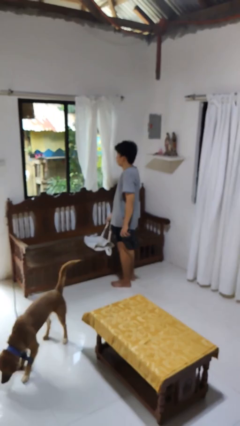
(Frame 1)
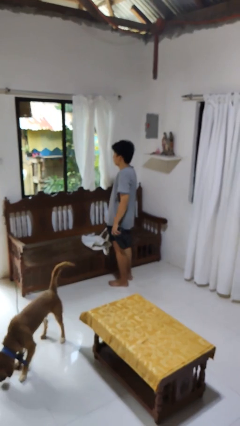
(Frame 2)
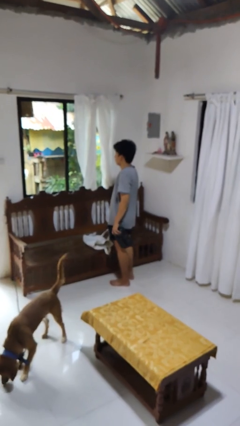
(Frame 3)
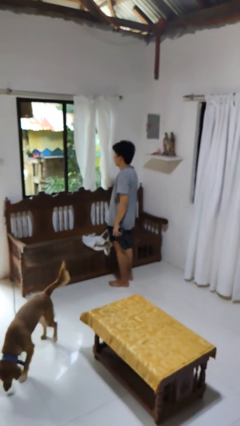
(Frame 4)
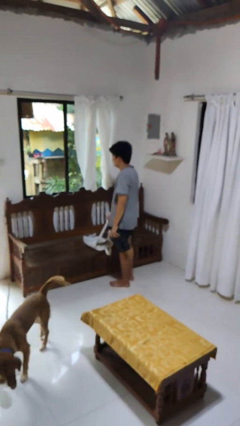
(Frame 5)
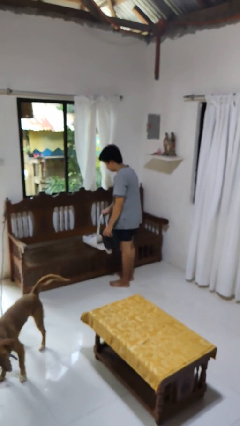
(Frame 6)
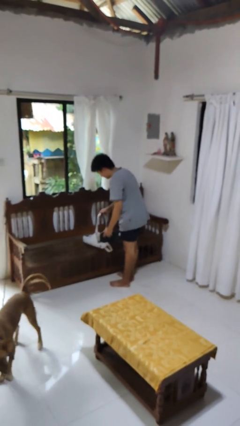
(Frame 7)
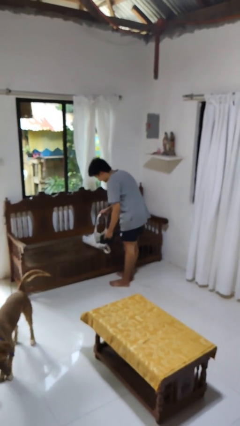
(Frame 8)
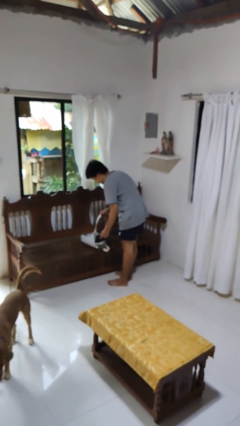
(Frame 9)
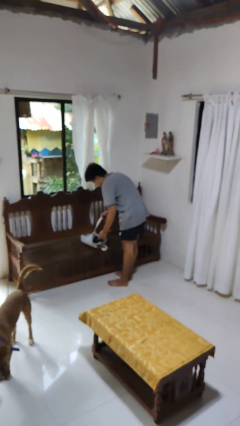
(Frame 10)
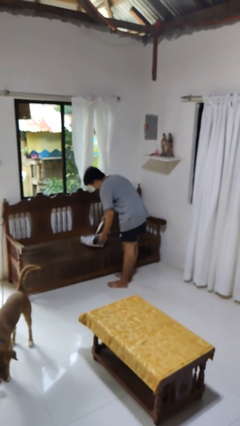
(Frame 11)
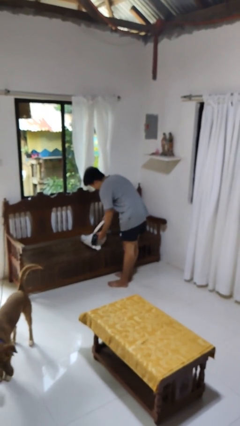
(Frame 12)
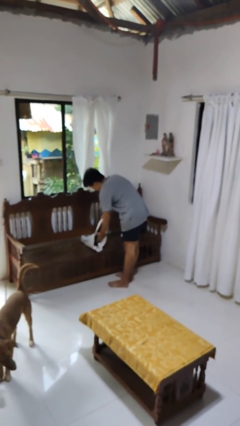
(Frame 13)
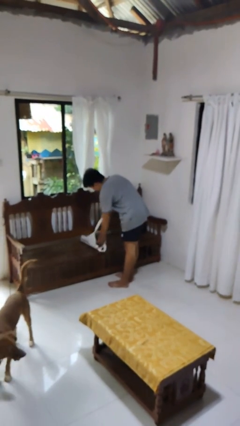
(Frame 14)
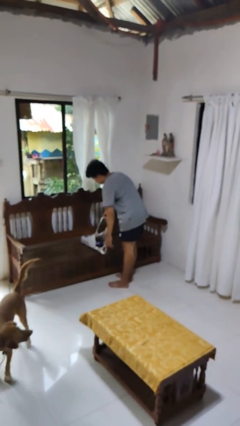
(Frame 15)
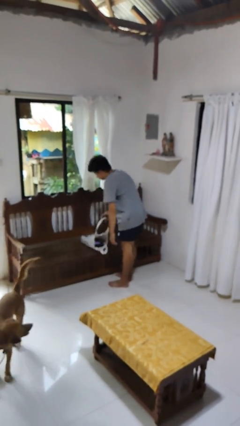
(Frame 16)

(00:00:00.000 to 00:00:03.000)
person puts object into bag

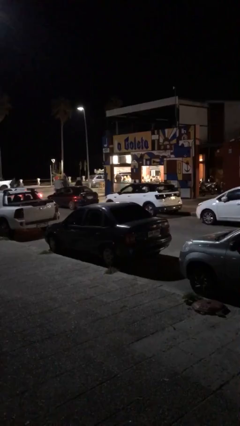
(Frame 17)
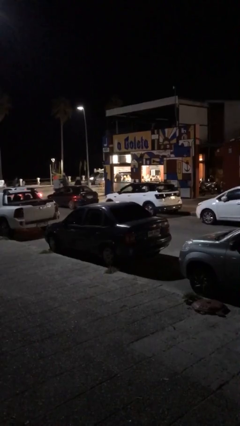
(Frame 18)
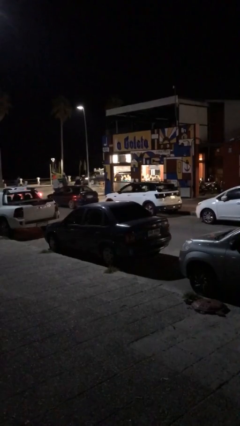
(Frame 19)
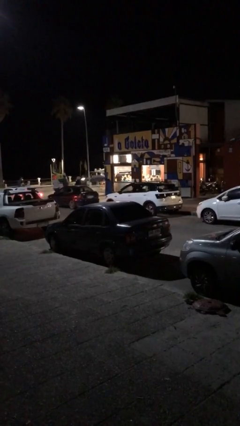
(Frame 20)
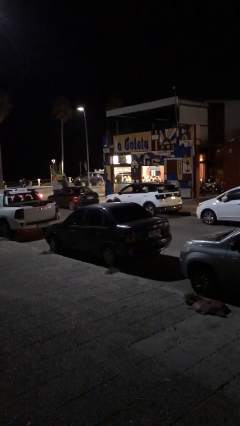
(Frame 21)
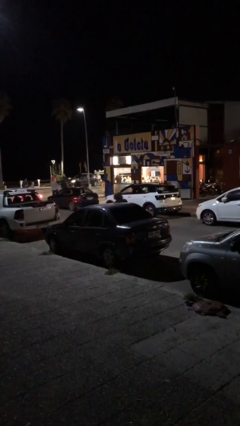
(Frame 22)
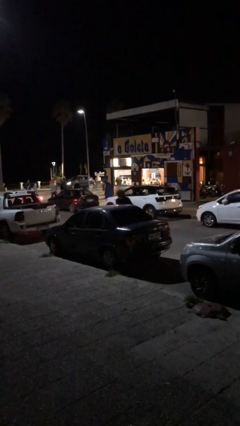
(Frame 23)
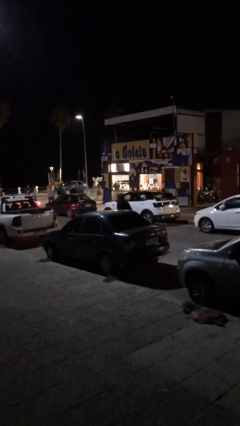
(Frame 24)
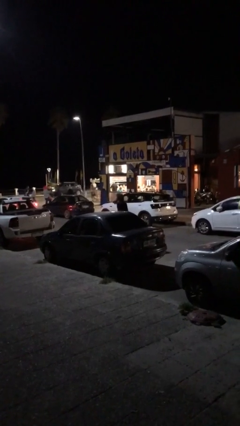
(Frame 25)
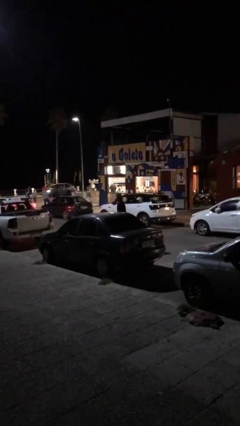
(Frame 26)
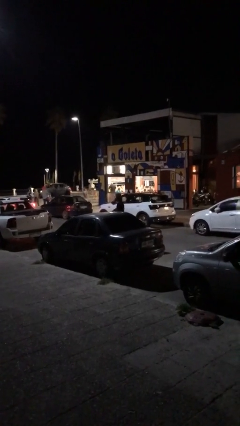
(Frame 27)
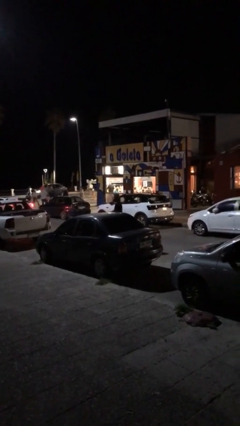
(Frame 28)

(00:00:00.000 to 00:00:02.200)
person exits car

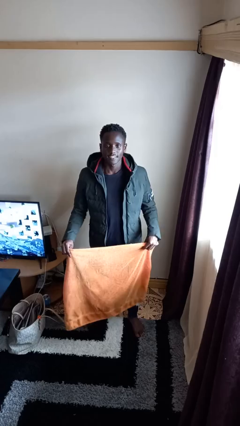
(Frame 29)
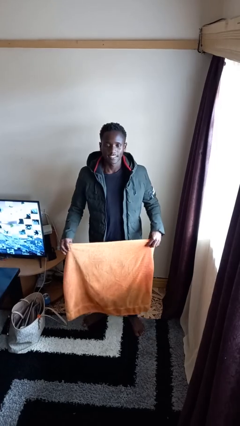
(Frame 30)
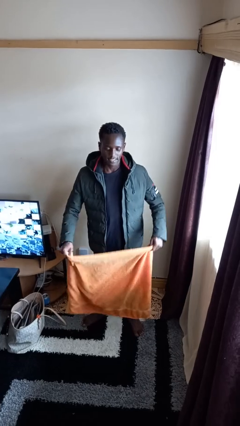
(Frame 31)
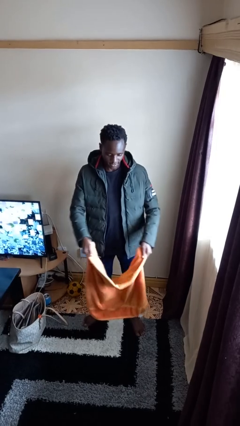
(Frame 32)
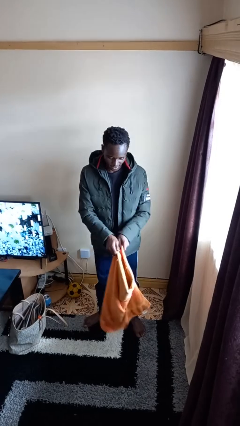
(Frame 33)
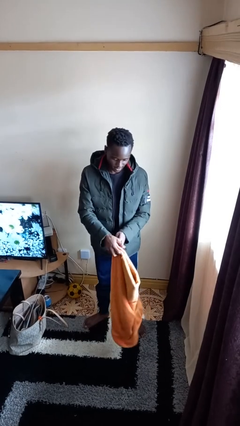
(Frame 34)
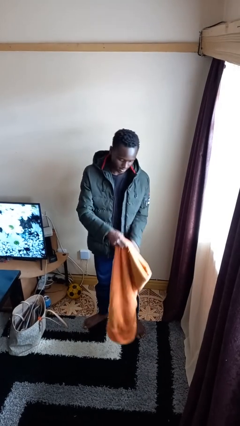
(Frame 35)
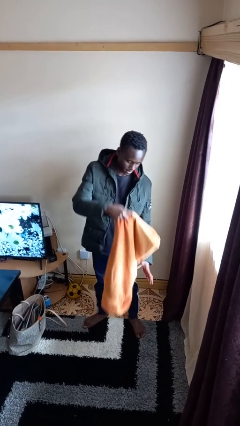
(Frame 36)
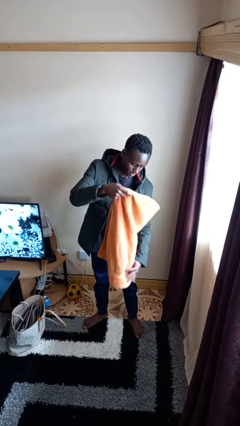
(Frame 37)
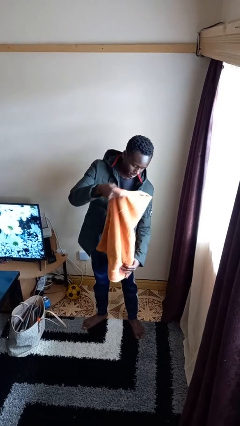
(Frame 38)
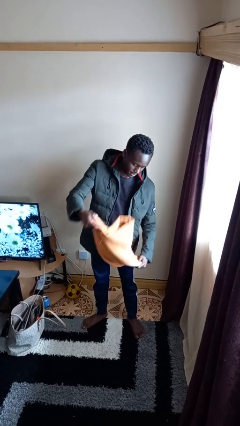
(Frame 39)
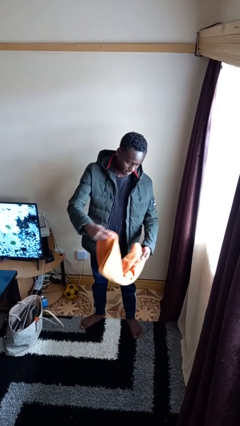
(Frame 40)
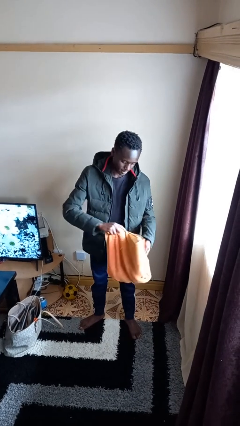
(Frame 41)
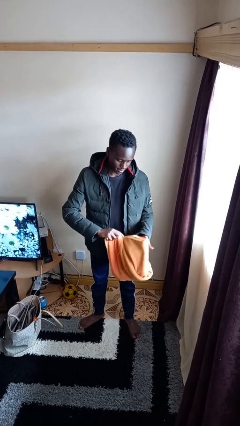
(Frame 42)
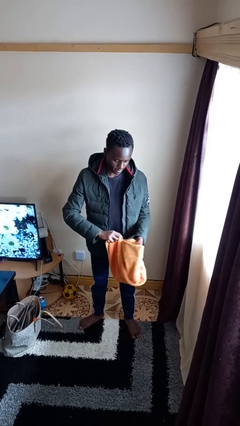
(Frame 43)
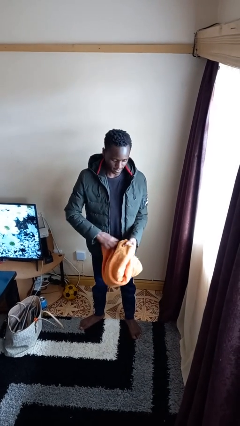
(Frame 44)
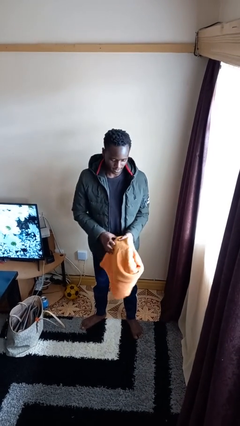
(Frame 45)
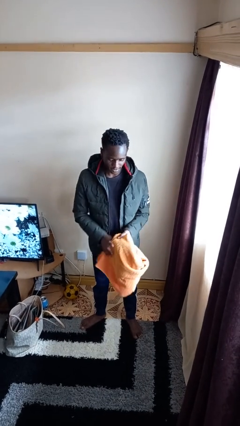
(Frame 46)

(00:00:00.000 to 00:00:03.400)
person folds towel

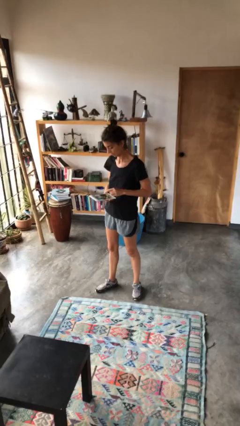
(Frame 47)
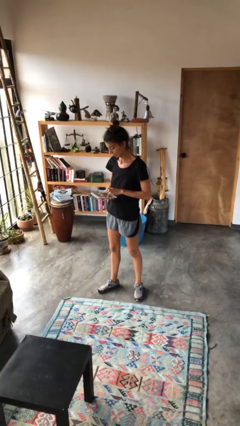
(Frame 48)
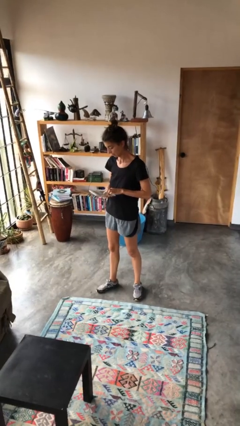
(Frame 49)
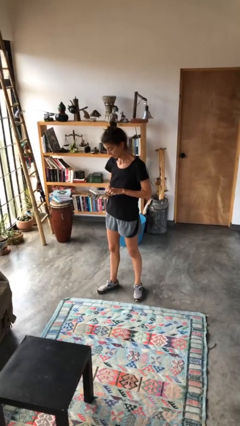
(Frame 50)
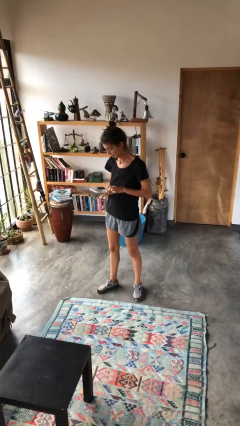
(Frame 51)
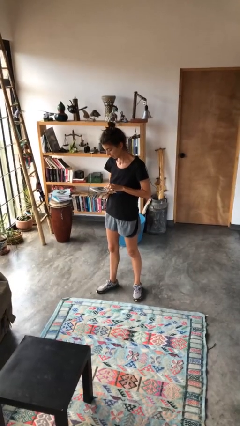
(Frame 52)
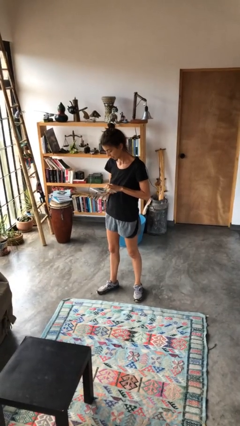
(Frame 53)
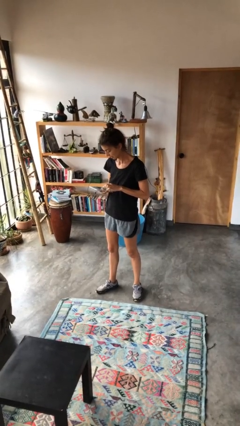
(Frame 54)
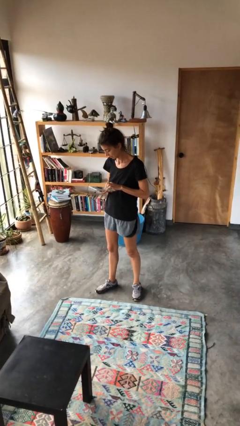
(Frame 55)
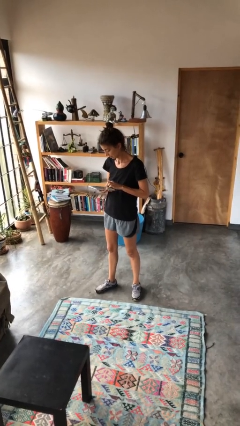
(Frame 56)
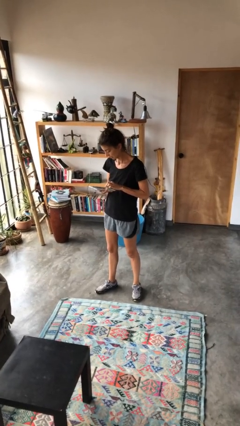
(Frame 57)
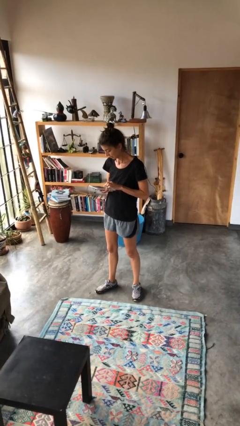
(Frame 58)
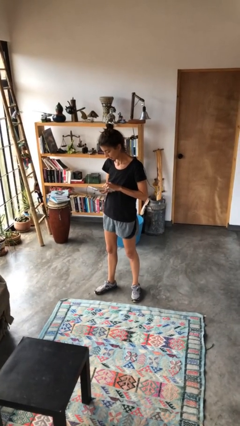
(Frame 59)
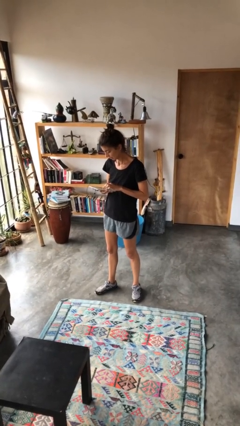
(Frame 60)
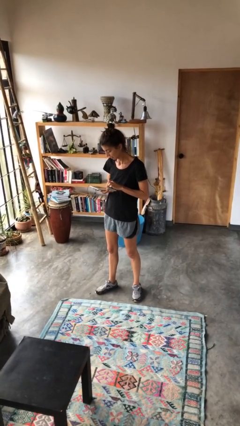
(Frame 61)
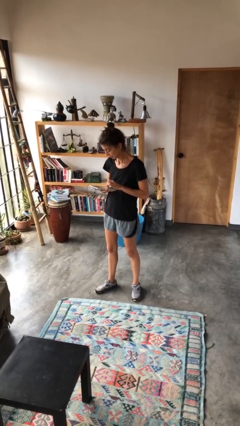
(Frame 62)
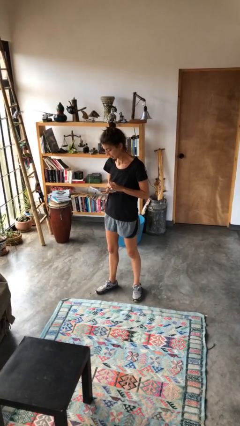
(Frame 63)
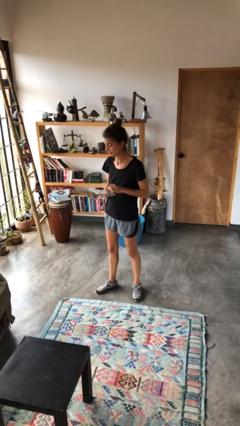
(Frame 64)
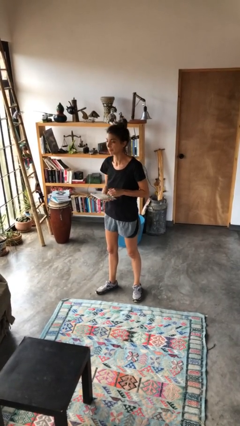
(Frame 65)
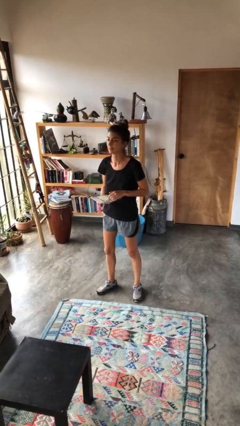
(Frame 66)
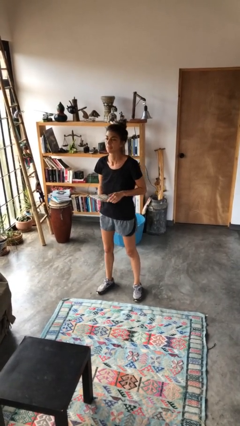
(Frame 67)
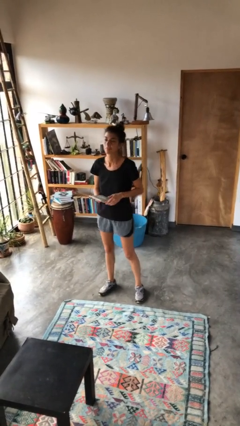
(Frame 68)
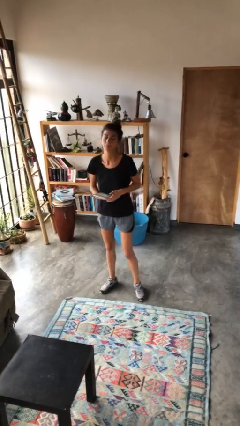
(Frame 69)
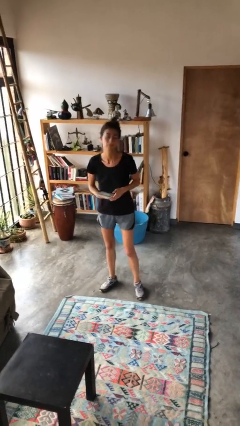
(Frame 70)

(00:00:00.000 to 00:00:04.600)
person interacts with tablet

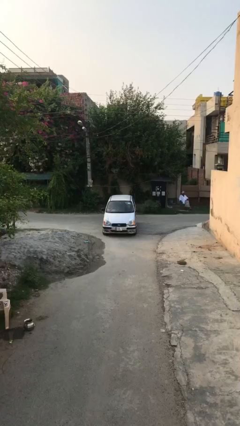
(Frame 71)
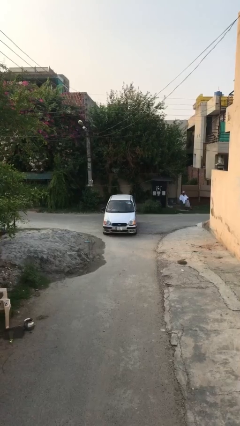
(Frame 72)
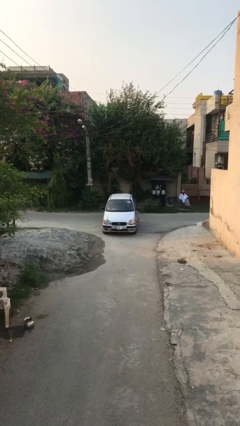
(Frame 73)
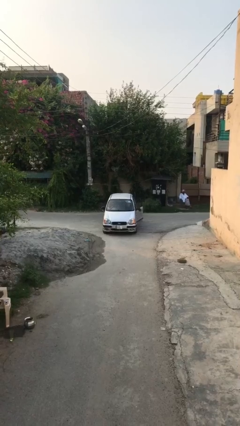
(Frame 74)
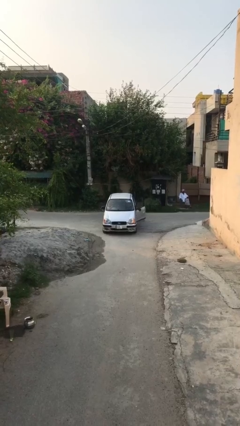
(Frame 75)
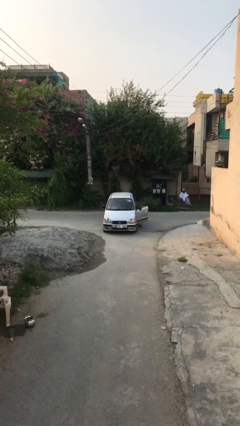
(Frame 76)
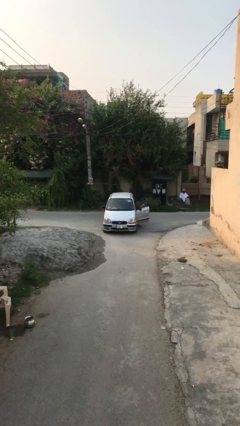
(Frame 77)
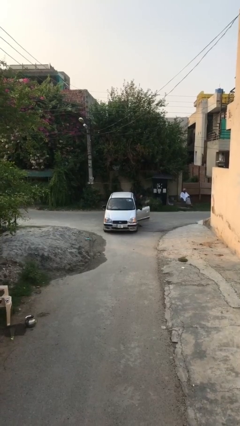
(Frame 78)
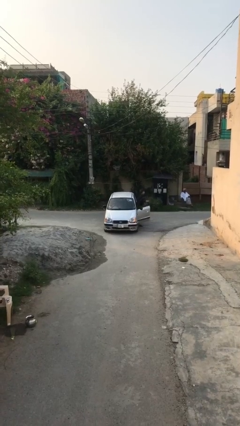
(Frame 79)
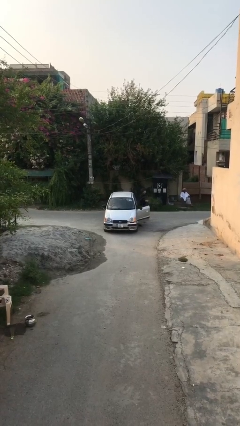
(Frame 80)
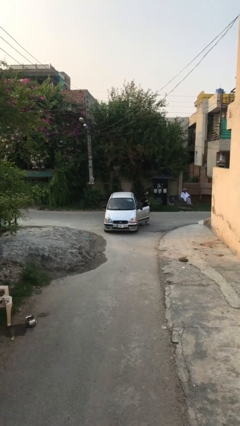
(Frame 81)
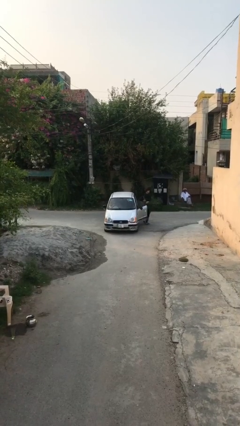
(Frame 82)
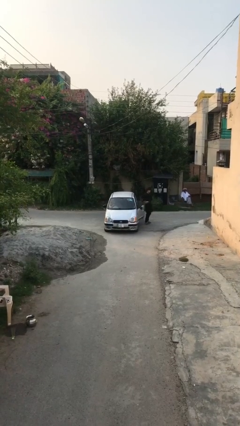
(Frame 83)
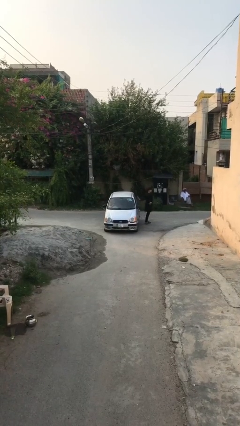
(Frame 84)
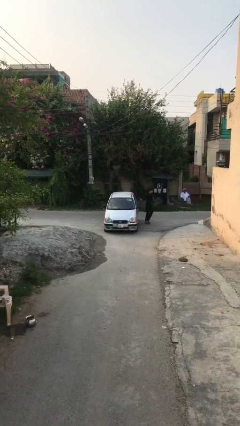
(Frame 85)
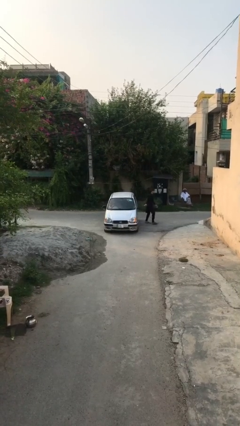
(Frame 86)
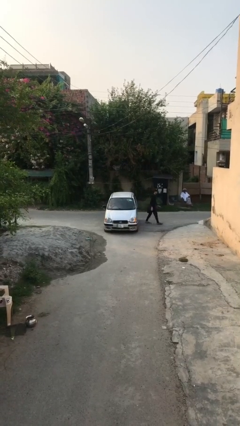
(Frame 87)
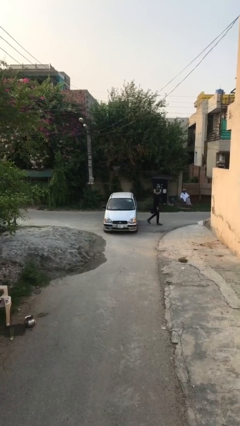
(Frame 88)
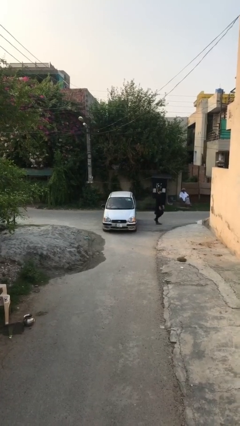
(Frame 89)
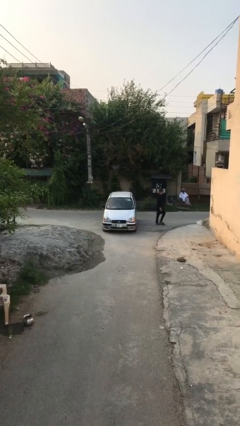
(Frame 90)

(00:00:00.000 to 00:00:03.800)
car drops off person

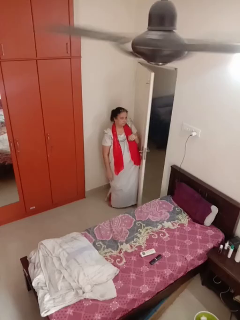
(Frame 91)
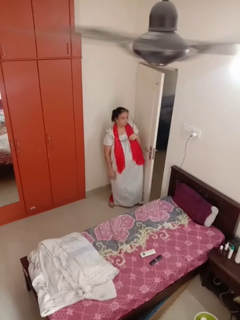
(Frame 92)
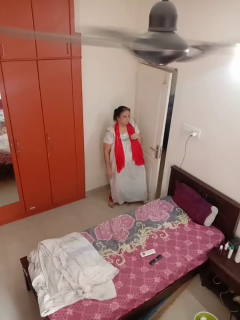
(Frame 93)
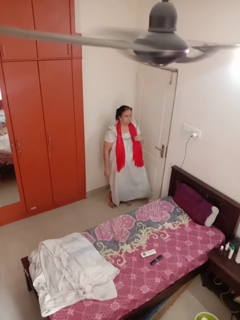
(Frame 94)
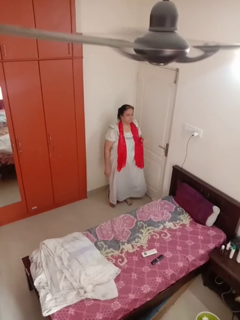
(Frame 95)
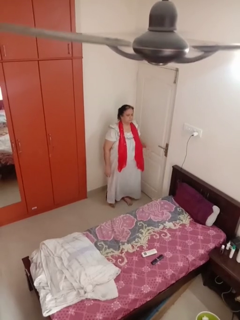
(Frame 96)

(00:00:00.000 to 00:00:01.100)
person closes door with hip
